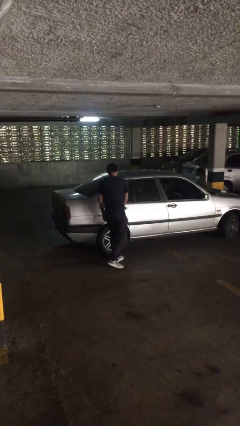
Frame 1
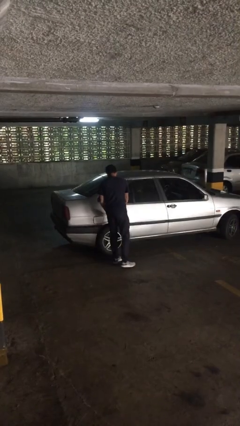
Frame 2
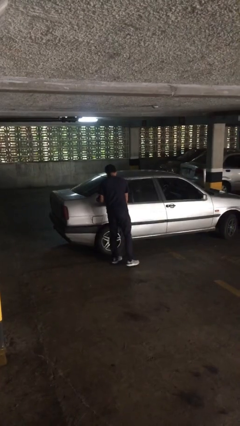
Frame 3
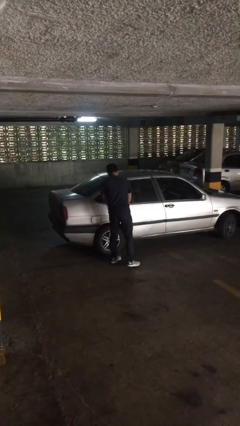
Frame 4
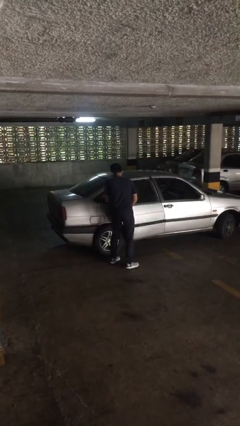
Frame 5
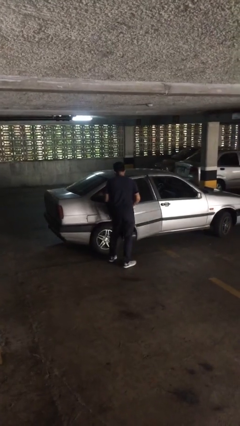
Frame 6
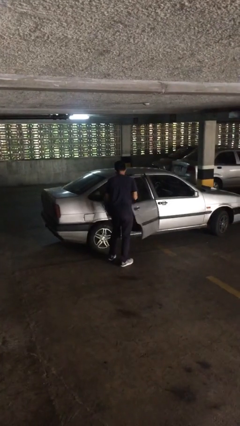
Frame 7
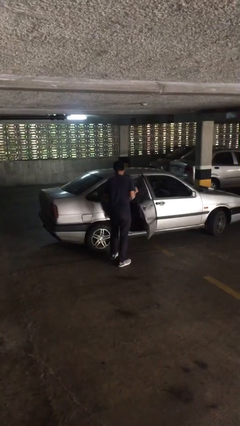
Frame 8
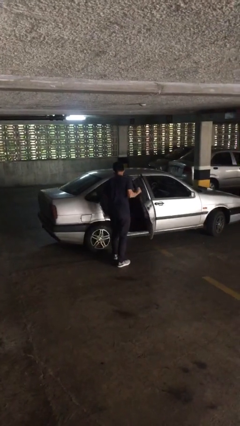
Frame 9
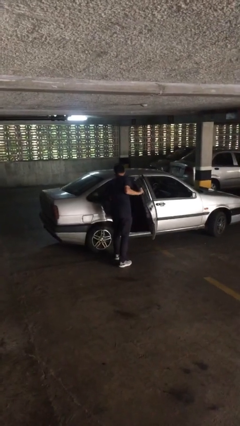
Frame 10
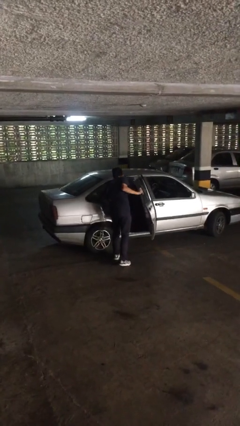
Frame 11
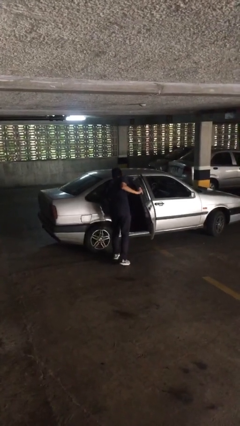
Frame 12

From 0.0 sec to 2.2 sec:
person opens car door

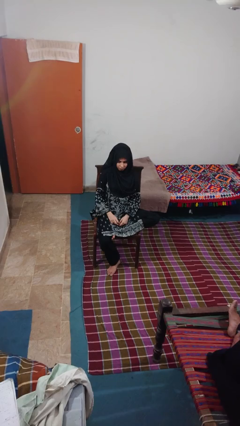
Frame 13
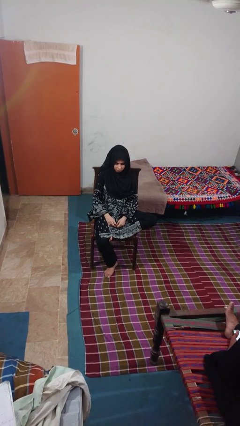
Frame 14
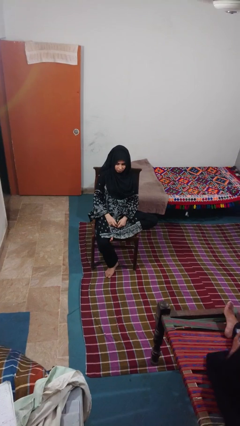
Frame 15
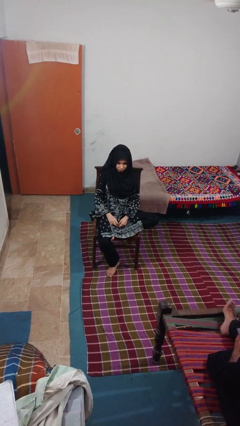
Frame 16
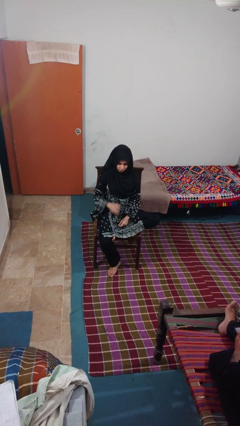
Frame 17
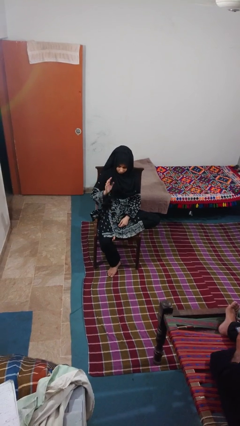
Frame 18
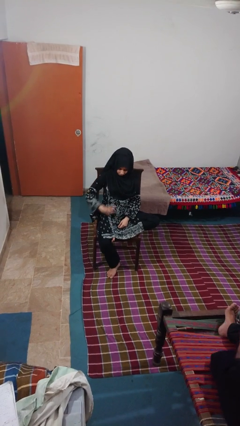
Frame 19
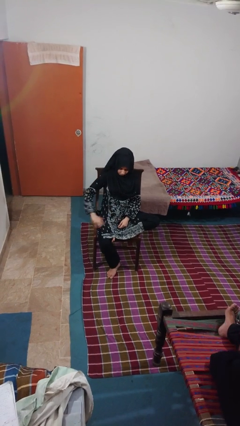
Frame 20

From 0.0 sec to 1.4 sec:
person swats bug

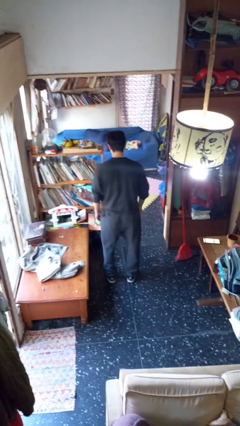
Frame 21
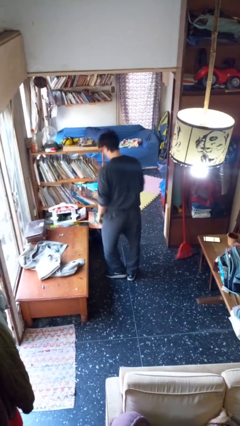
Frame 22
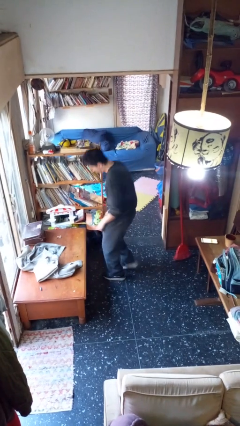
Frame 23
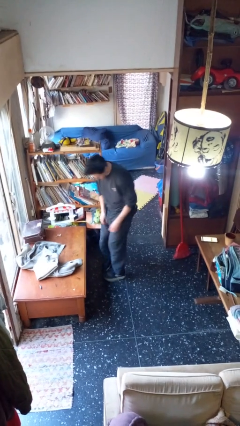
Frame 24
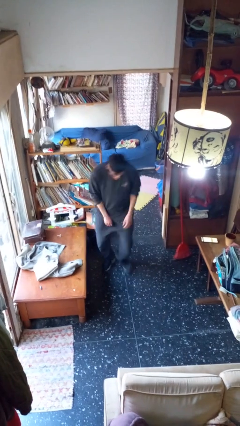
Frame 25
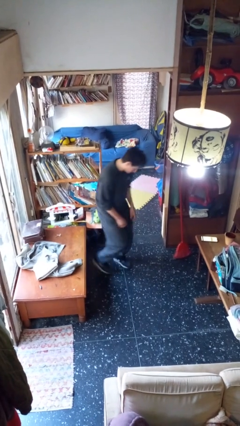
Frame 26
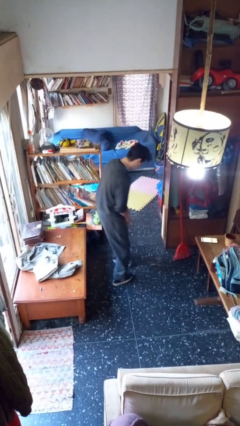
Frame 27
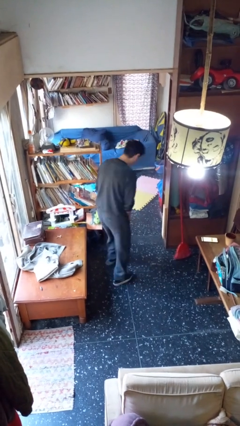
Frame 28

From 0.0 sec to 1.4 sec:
person twirls

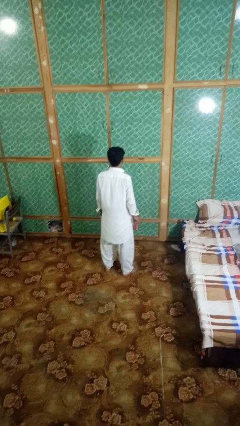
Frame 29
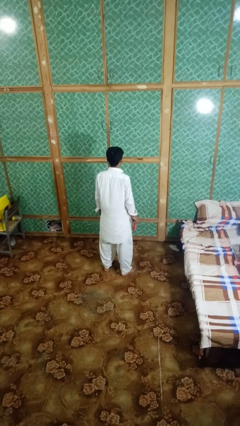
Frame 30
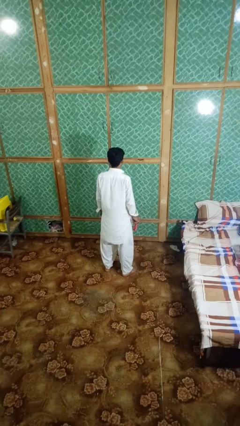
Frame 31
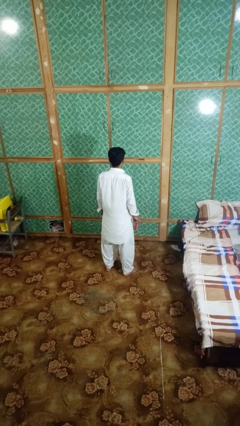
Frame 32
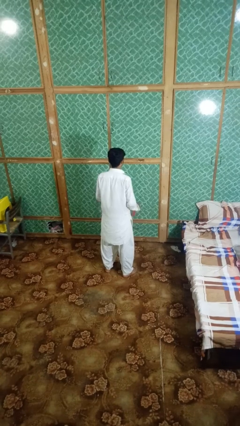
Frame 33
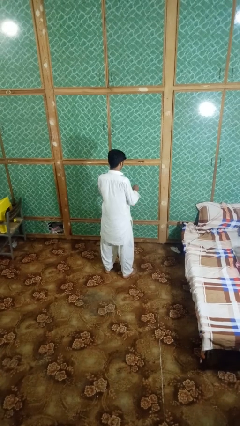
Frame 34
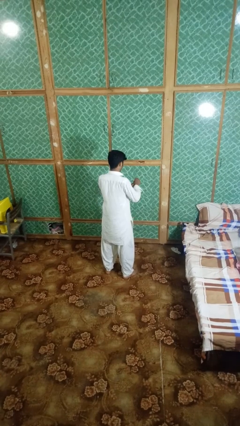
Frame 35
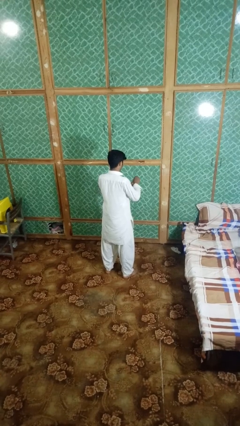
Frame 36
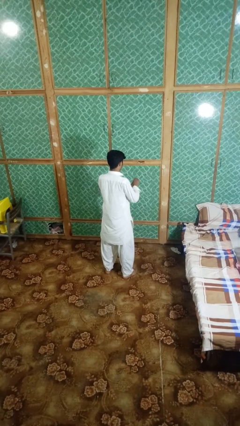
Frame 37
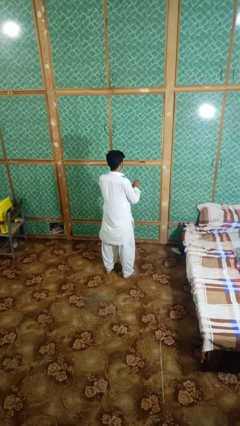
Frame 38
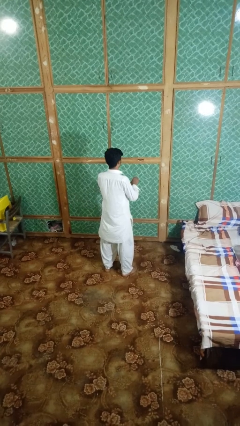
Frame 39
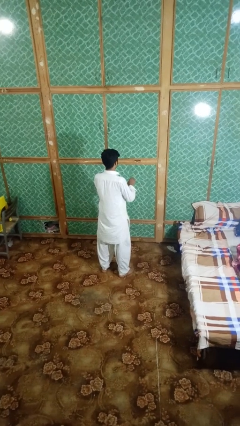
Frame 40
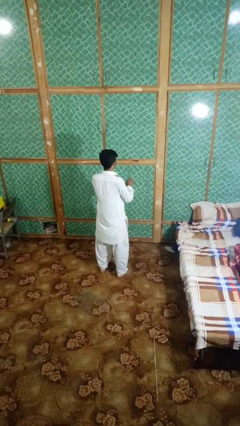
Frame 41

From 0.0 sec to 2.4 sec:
person opens beverage can

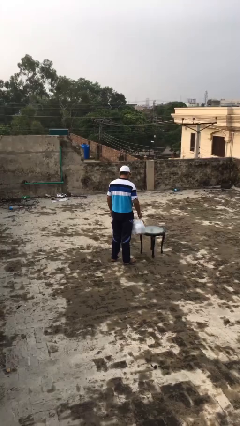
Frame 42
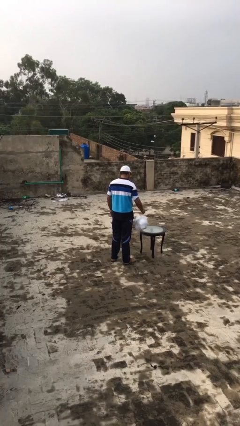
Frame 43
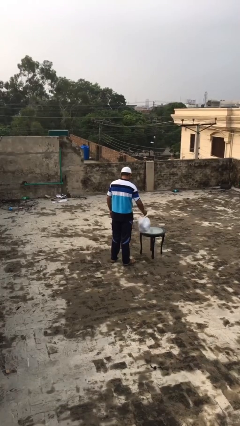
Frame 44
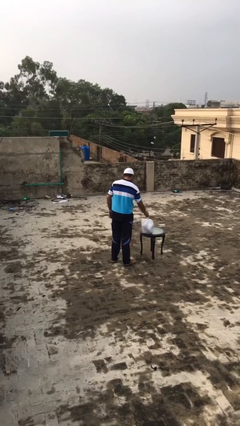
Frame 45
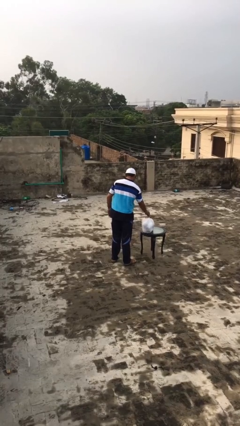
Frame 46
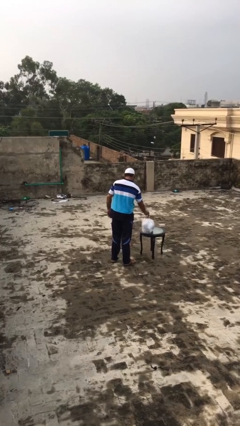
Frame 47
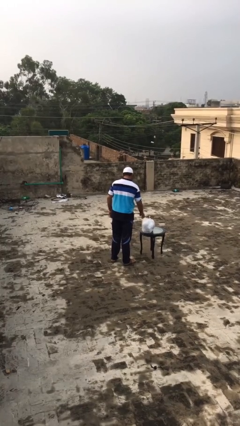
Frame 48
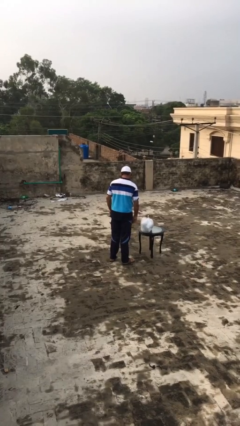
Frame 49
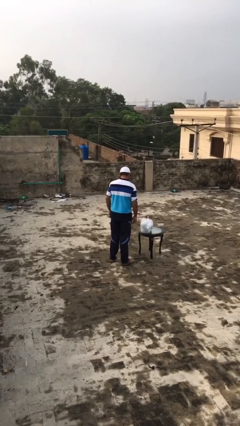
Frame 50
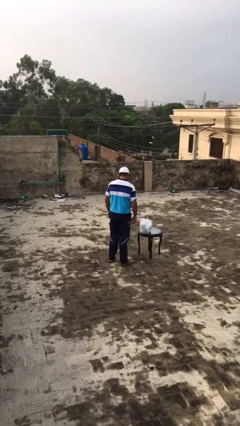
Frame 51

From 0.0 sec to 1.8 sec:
person puts down object on table

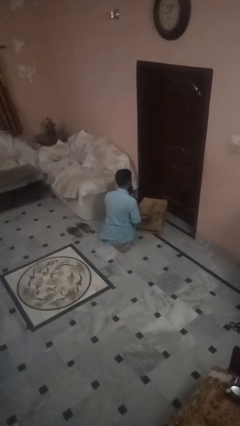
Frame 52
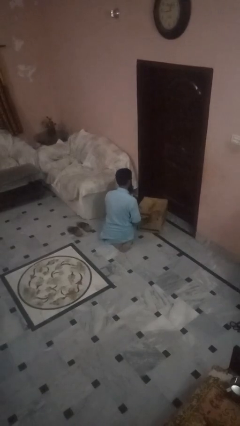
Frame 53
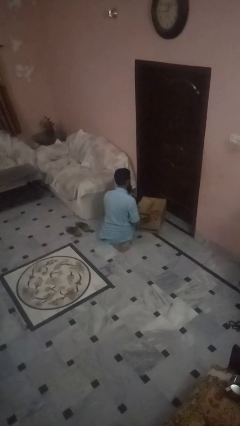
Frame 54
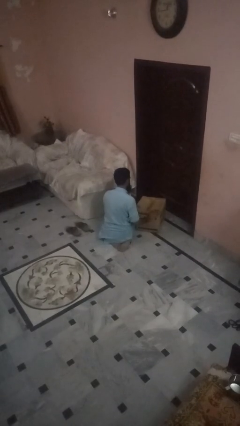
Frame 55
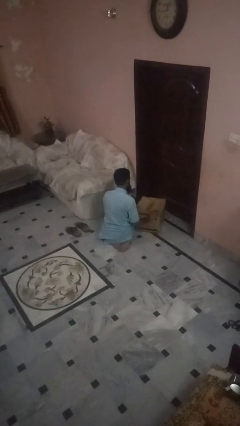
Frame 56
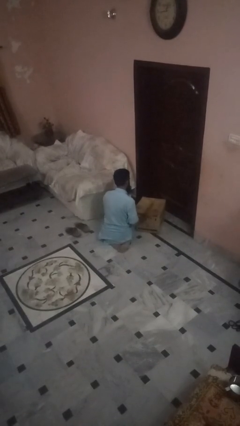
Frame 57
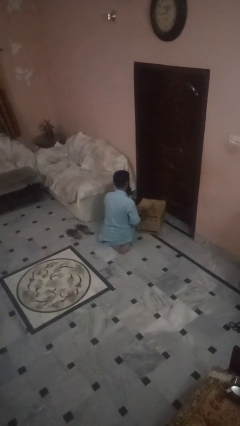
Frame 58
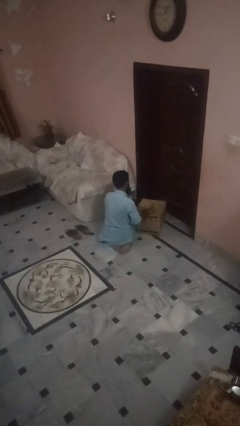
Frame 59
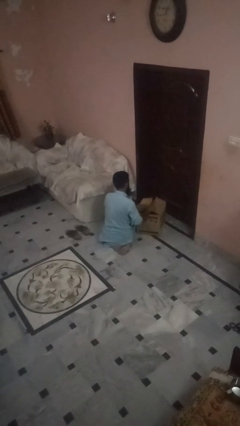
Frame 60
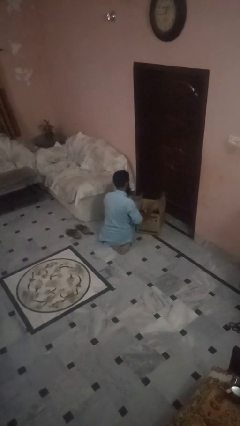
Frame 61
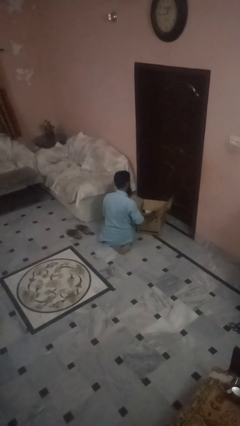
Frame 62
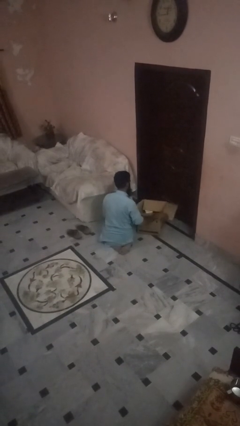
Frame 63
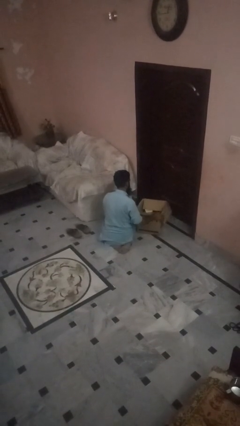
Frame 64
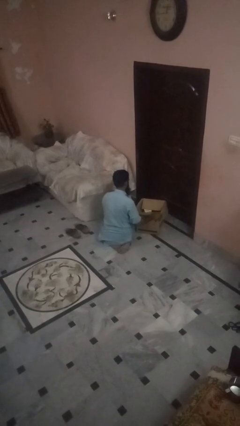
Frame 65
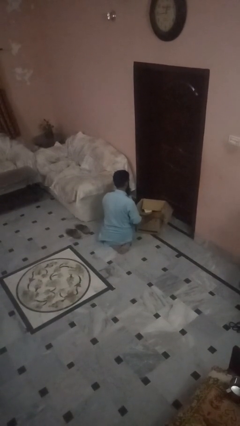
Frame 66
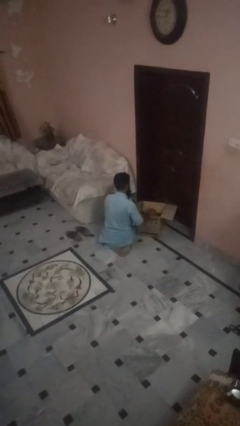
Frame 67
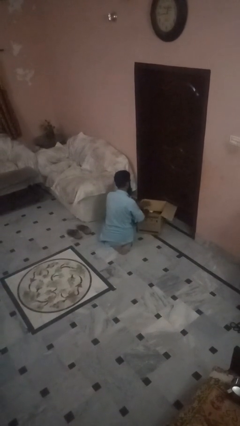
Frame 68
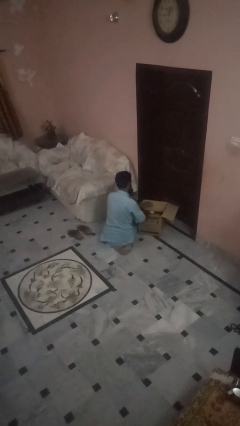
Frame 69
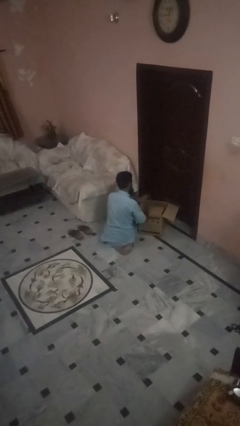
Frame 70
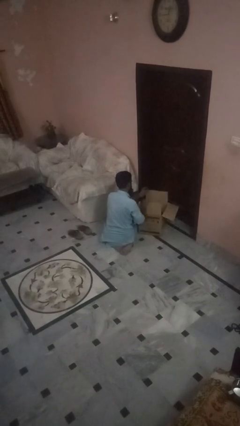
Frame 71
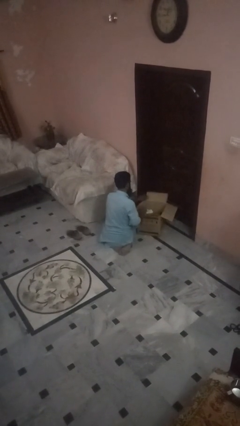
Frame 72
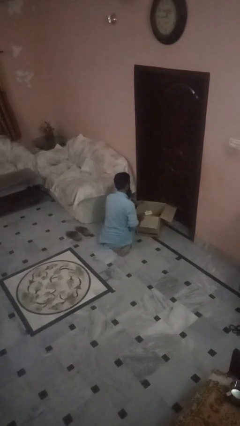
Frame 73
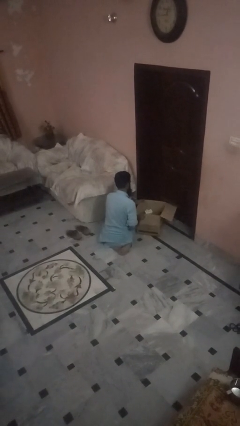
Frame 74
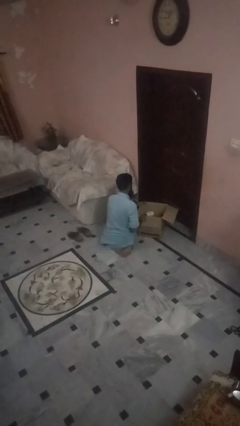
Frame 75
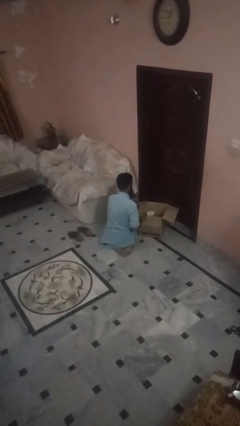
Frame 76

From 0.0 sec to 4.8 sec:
person opens box

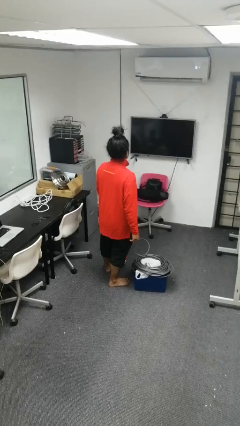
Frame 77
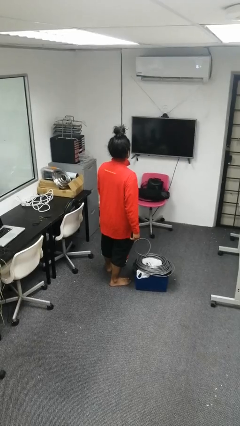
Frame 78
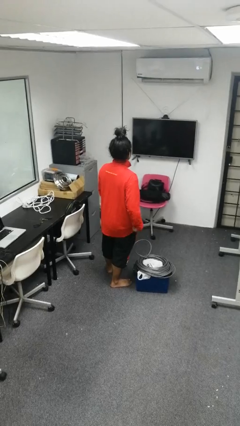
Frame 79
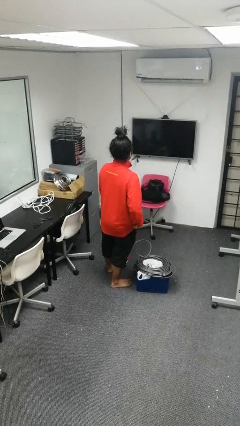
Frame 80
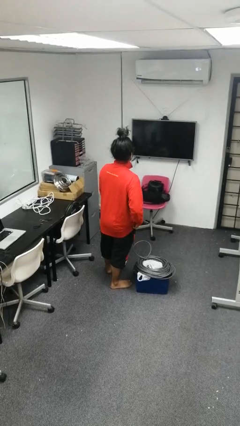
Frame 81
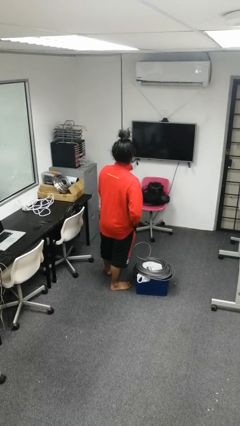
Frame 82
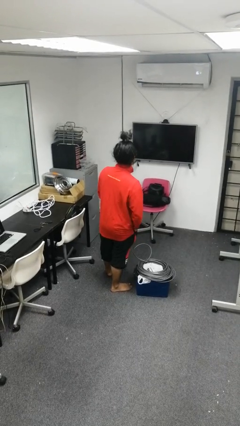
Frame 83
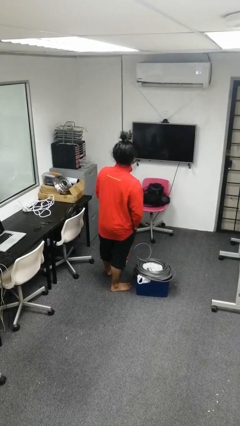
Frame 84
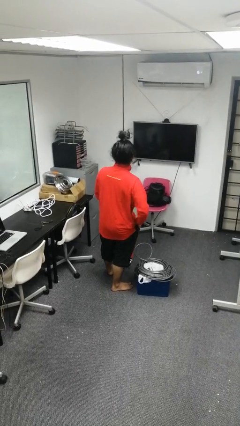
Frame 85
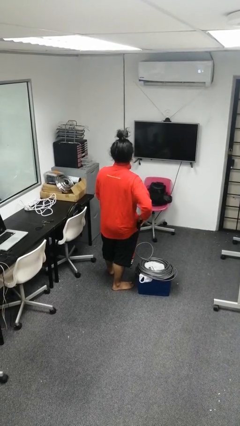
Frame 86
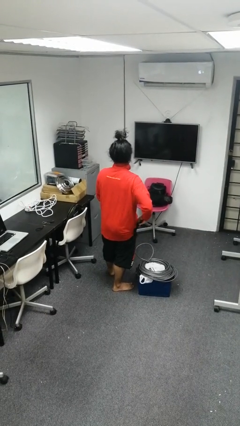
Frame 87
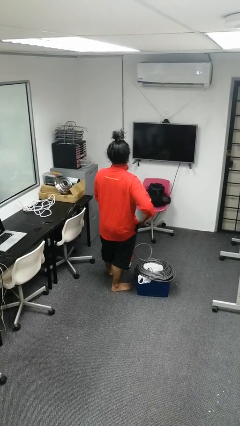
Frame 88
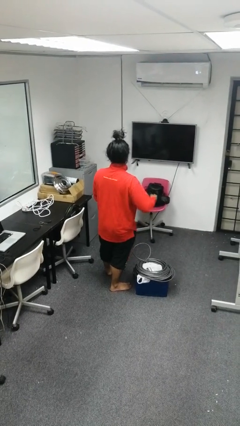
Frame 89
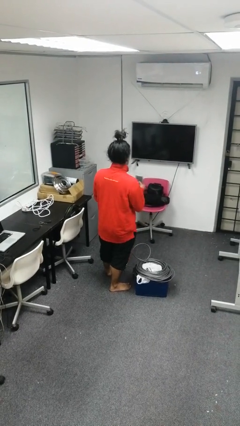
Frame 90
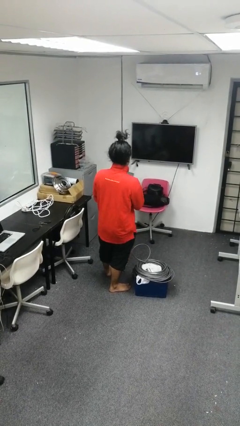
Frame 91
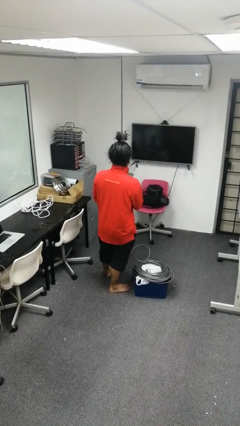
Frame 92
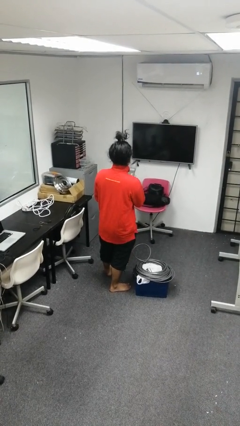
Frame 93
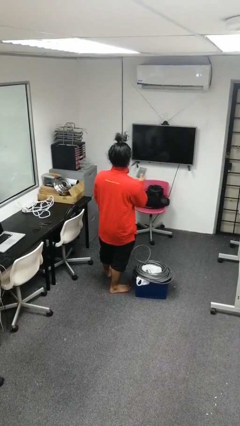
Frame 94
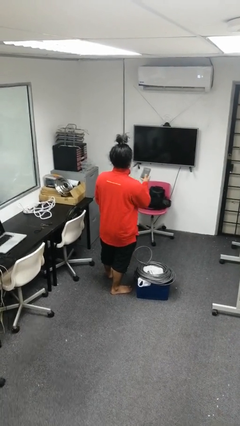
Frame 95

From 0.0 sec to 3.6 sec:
person takes phone from pocket
